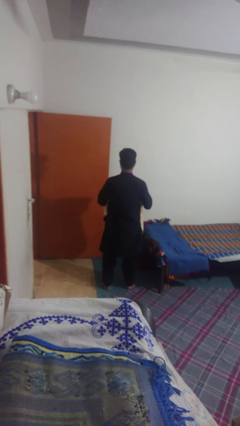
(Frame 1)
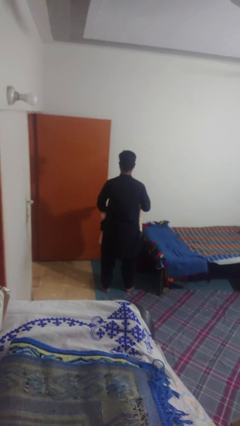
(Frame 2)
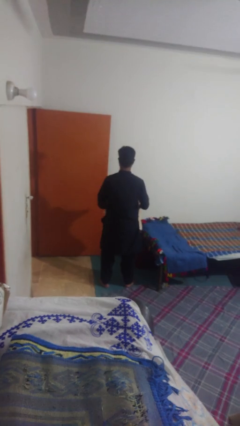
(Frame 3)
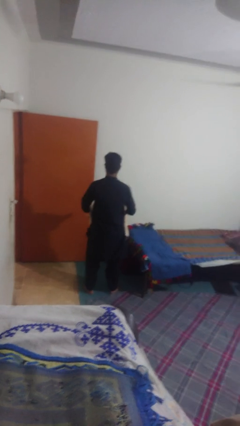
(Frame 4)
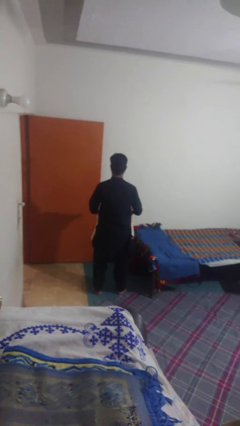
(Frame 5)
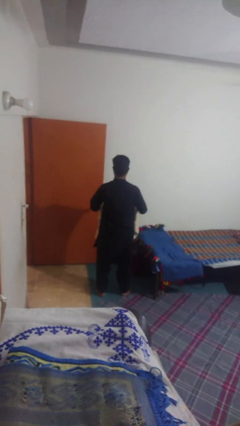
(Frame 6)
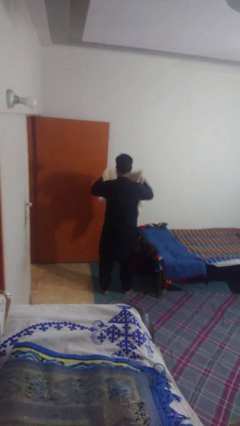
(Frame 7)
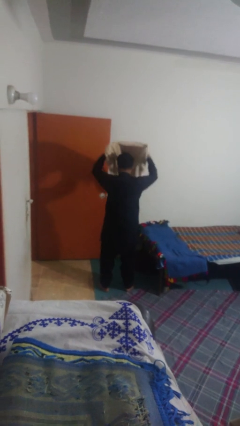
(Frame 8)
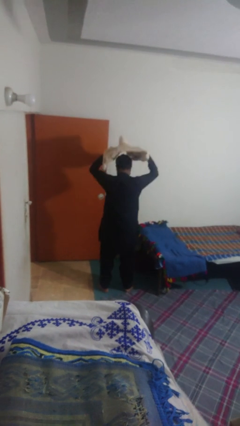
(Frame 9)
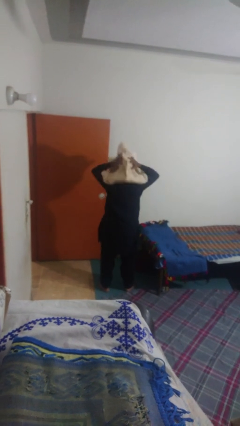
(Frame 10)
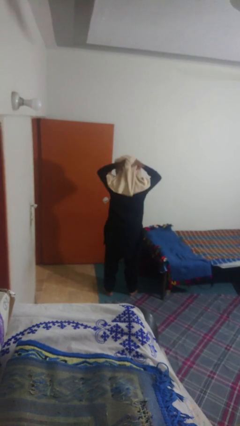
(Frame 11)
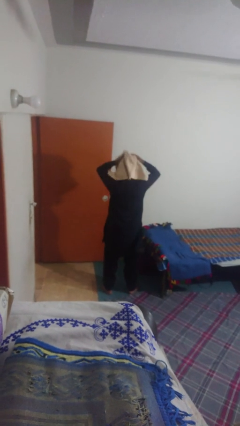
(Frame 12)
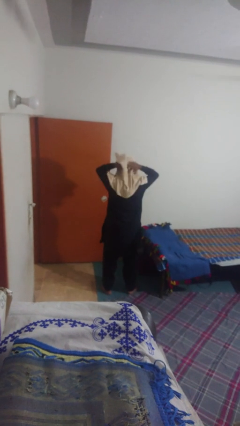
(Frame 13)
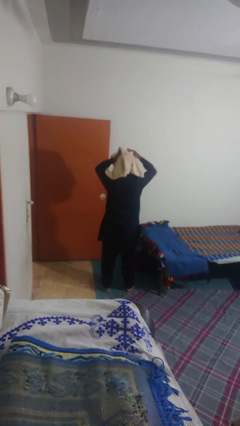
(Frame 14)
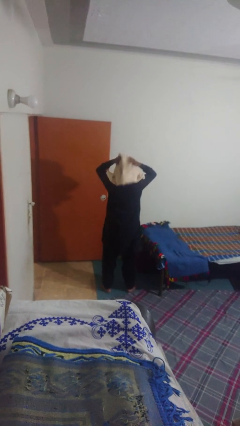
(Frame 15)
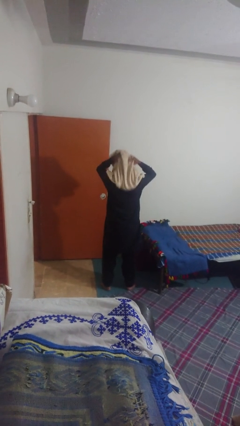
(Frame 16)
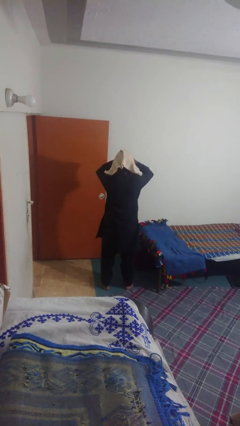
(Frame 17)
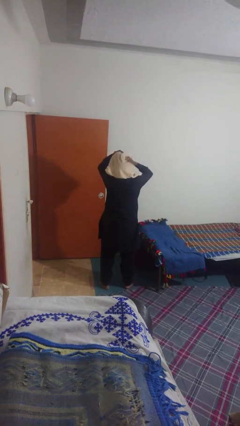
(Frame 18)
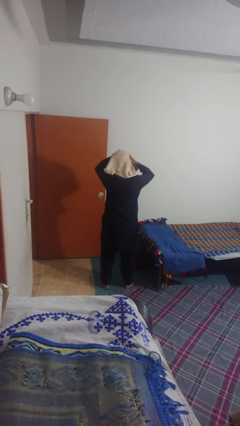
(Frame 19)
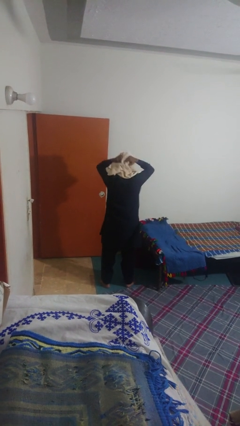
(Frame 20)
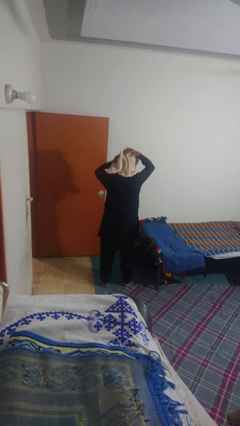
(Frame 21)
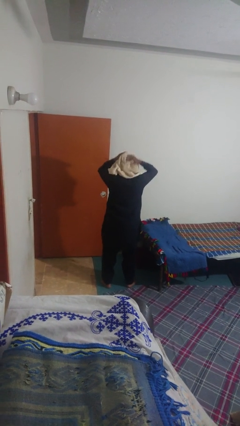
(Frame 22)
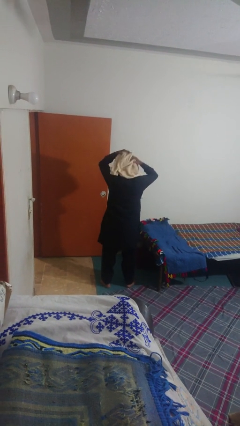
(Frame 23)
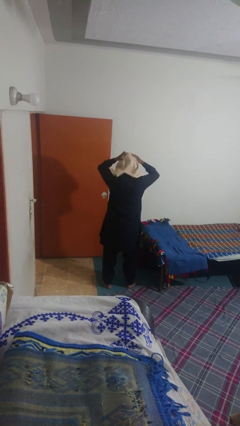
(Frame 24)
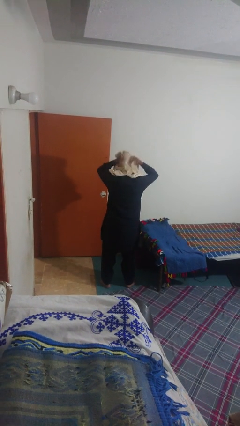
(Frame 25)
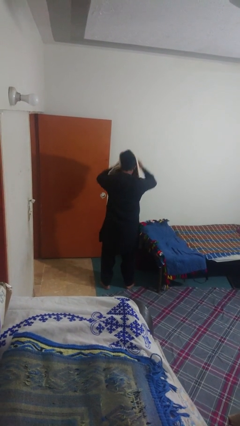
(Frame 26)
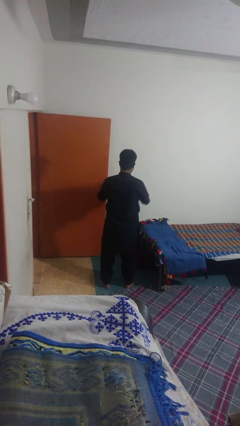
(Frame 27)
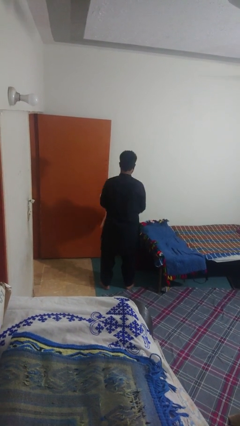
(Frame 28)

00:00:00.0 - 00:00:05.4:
person dries hair with towel

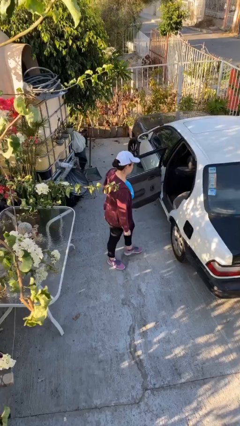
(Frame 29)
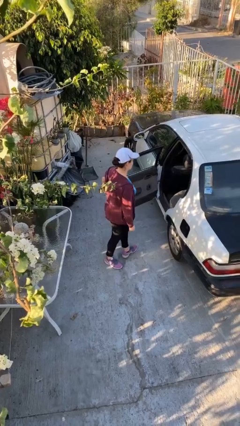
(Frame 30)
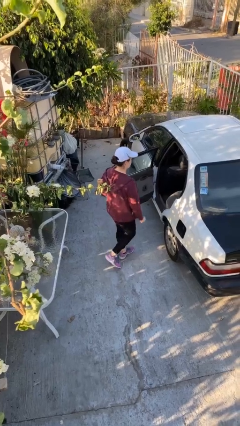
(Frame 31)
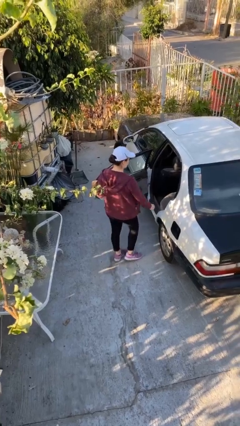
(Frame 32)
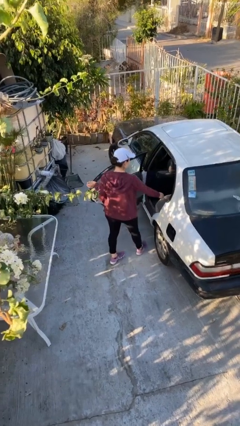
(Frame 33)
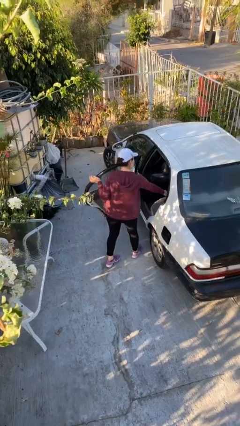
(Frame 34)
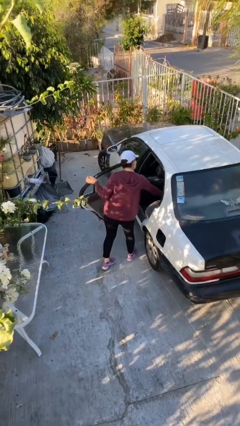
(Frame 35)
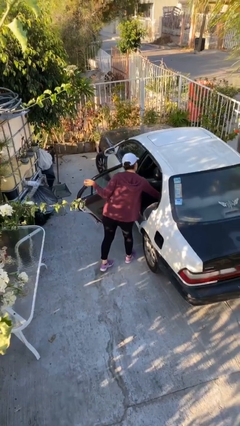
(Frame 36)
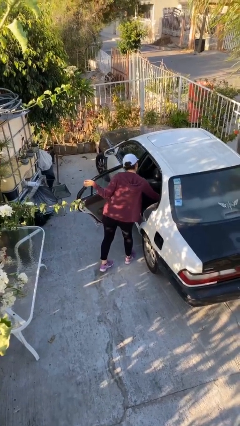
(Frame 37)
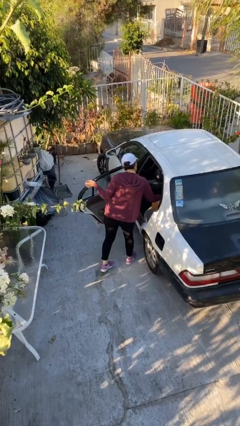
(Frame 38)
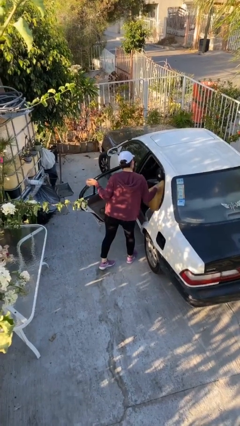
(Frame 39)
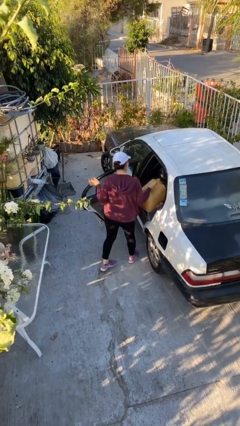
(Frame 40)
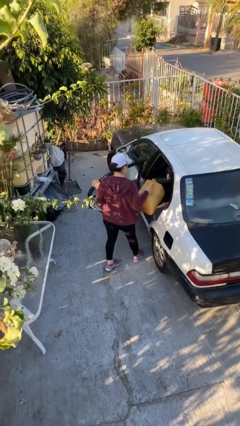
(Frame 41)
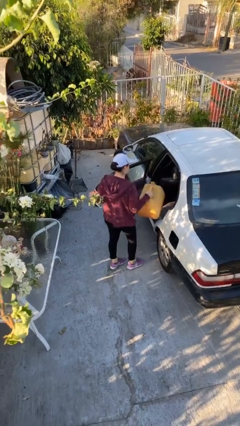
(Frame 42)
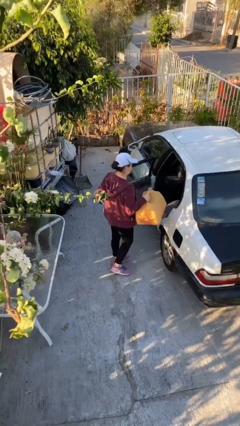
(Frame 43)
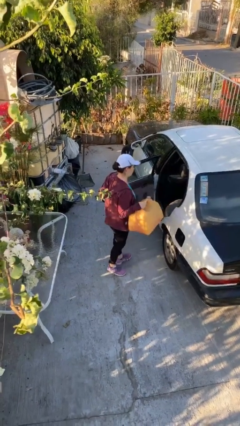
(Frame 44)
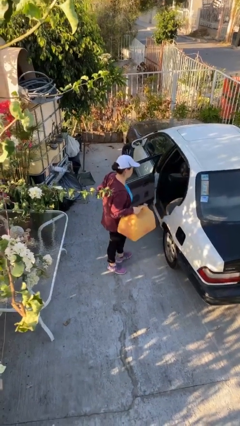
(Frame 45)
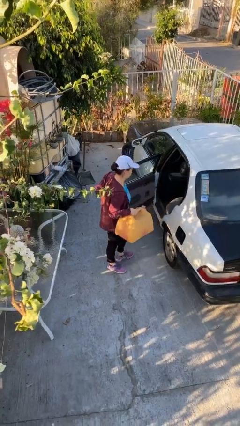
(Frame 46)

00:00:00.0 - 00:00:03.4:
person unloads car

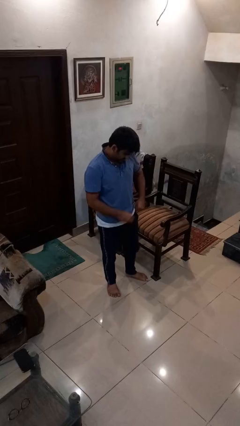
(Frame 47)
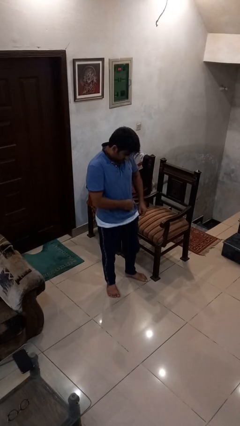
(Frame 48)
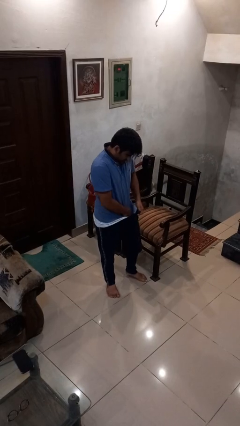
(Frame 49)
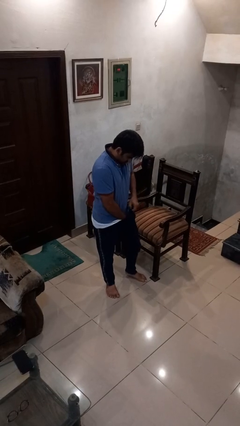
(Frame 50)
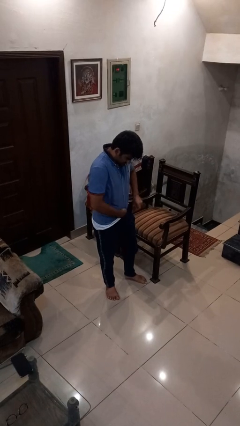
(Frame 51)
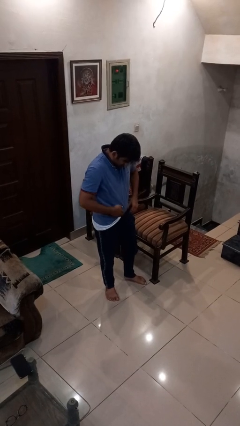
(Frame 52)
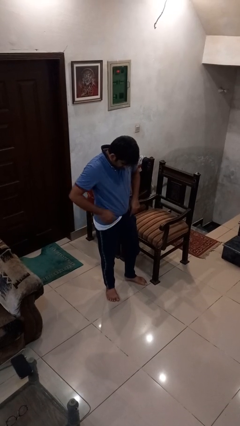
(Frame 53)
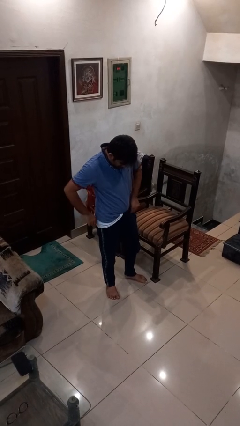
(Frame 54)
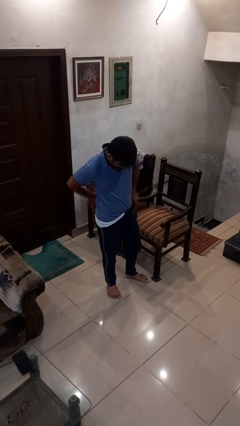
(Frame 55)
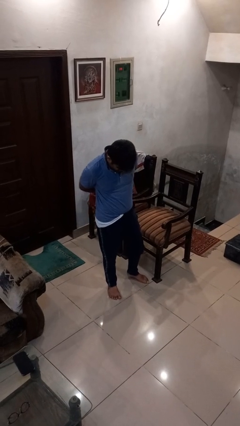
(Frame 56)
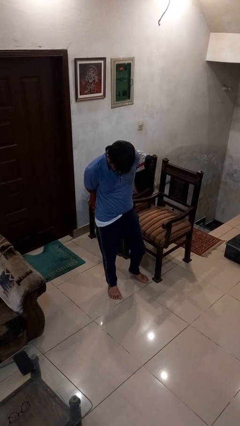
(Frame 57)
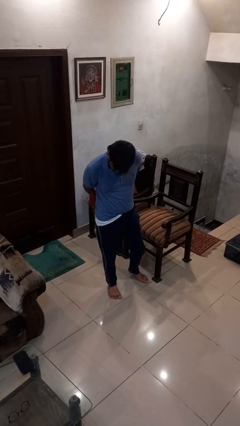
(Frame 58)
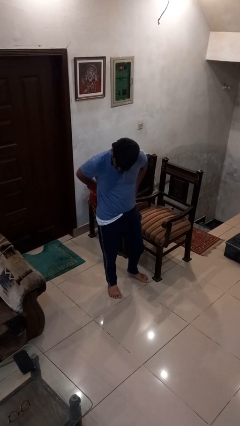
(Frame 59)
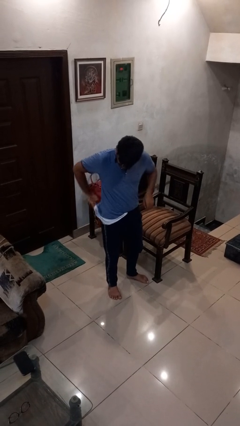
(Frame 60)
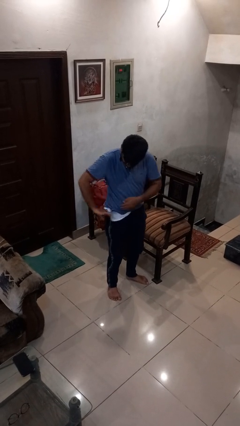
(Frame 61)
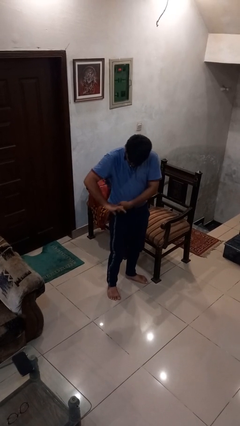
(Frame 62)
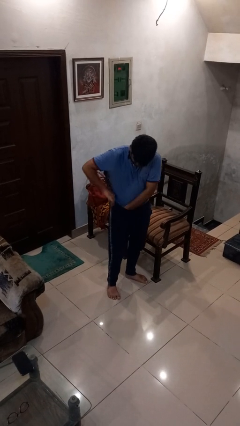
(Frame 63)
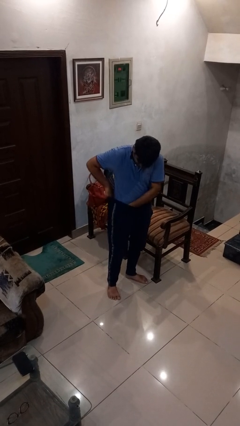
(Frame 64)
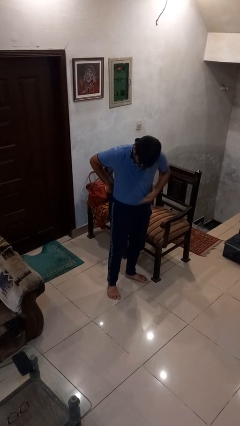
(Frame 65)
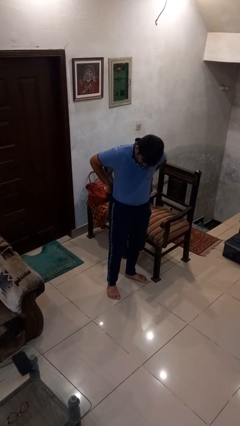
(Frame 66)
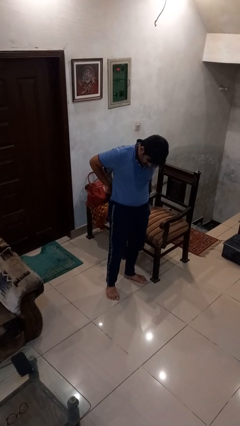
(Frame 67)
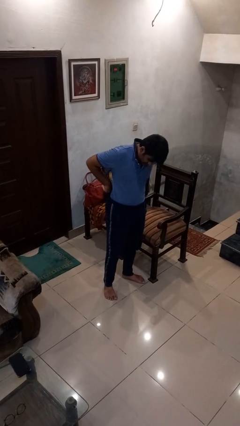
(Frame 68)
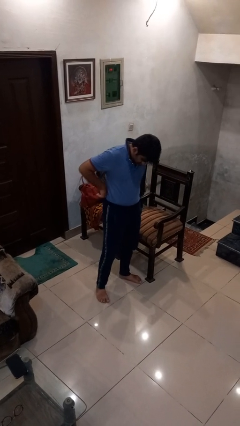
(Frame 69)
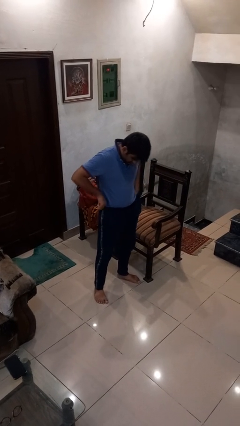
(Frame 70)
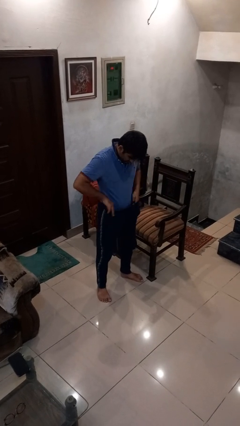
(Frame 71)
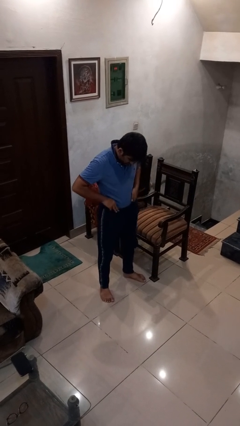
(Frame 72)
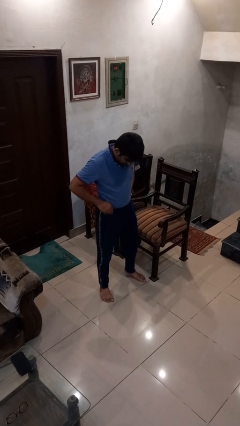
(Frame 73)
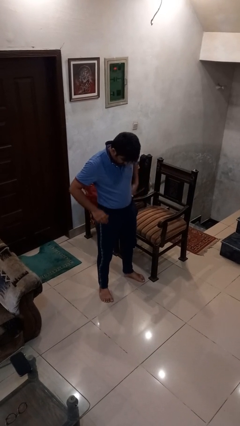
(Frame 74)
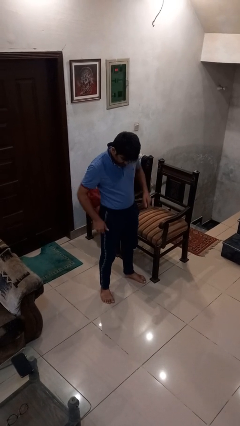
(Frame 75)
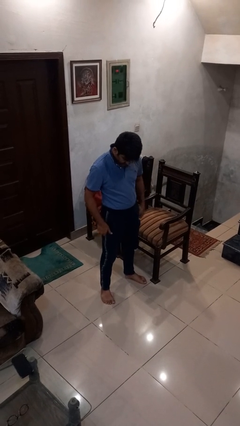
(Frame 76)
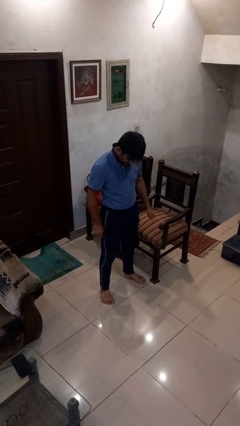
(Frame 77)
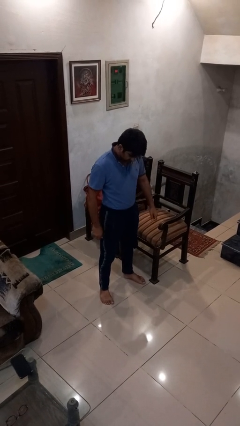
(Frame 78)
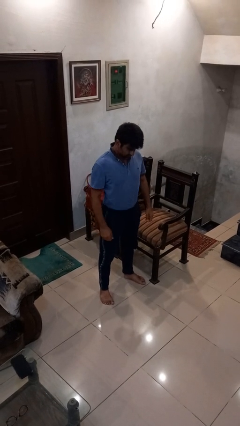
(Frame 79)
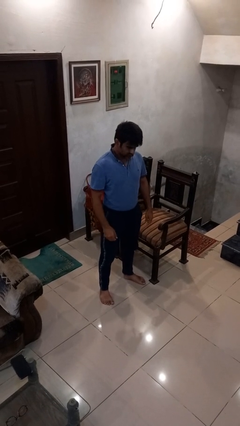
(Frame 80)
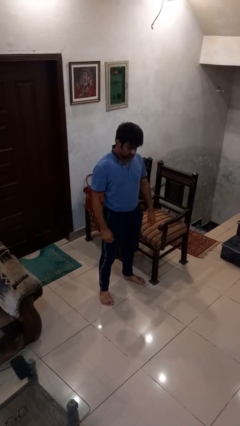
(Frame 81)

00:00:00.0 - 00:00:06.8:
person tucks in shirt

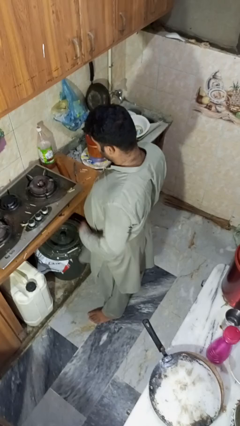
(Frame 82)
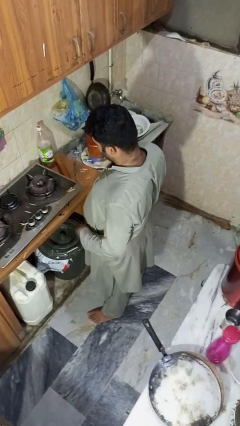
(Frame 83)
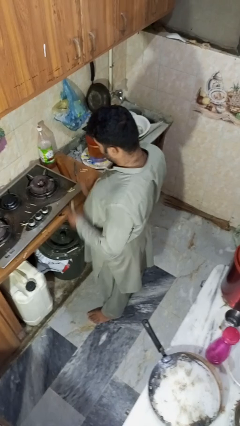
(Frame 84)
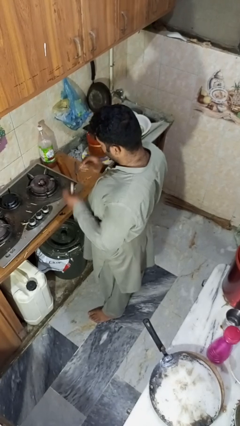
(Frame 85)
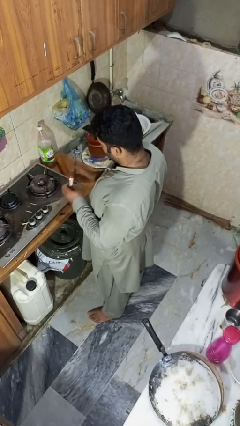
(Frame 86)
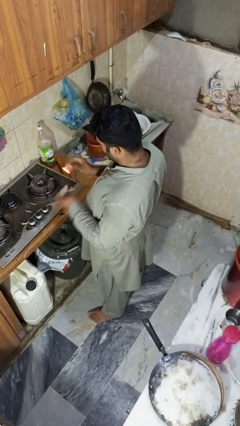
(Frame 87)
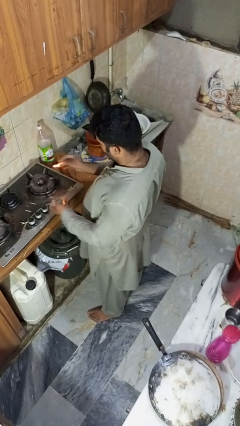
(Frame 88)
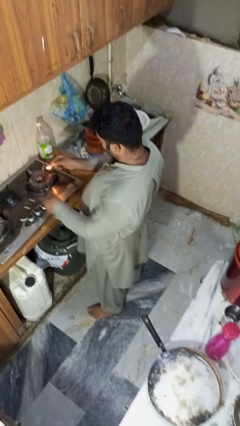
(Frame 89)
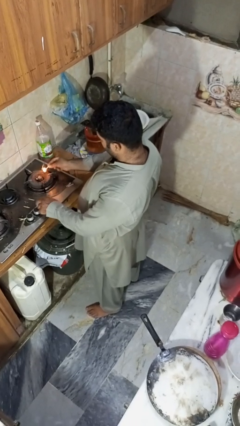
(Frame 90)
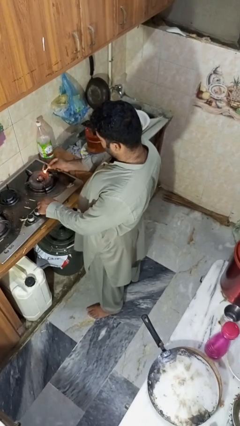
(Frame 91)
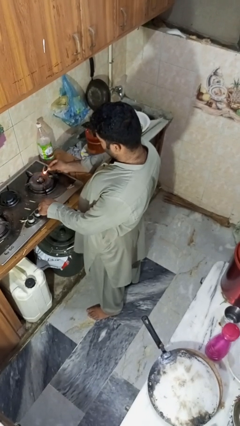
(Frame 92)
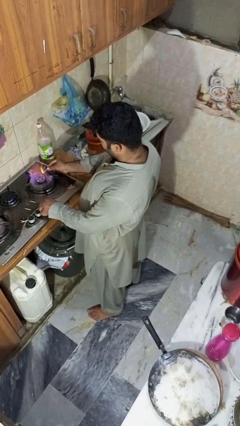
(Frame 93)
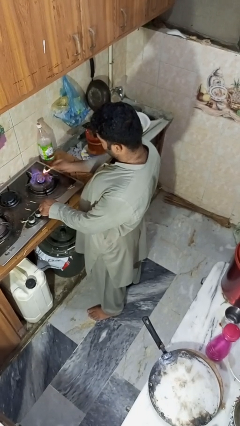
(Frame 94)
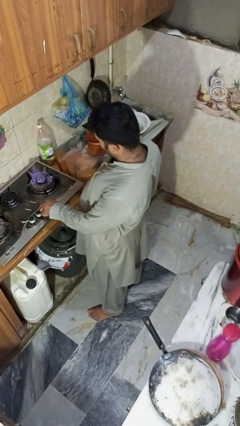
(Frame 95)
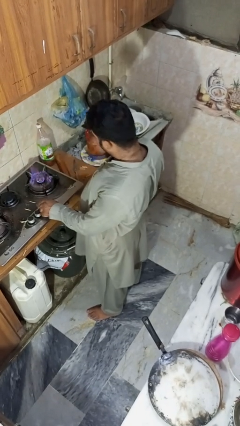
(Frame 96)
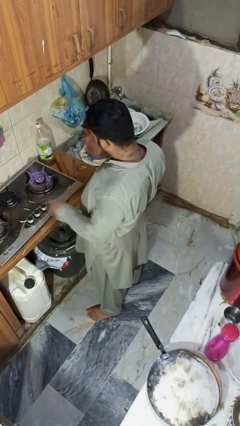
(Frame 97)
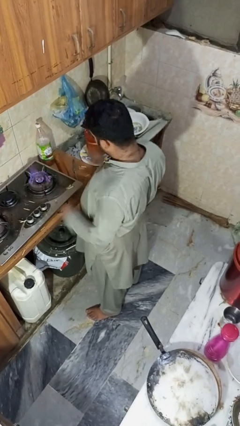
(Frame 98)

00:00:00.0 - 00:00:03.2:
person turns on stovetop
